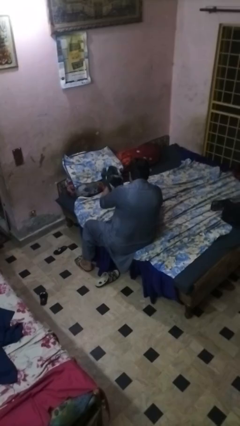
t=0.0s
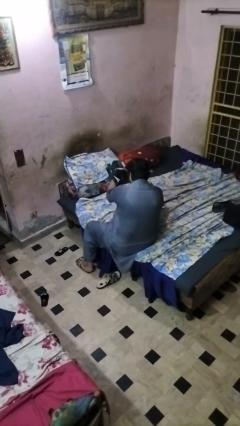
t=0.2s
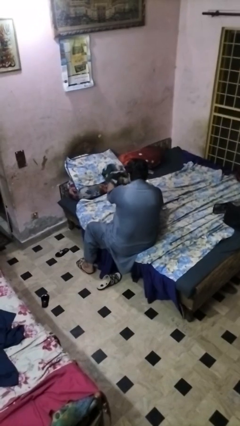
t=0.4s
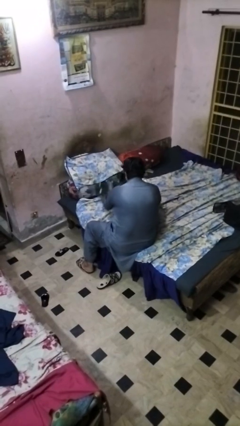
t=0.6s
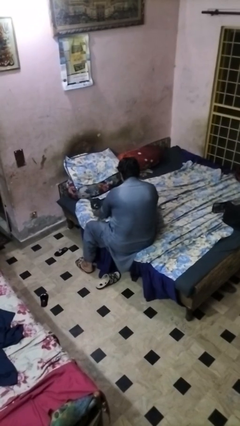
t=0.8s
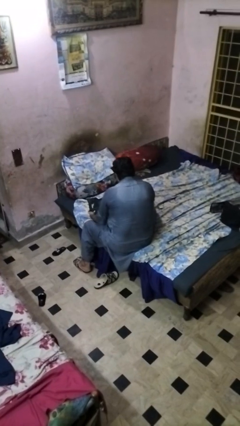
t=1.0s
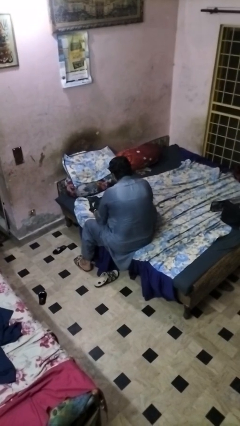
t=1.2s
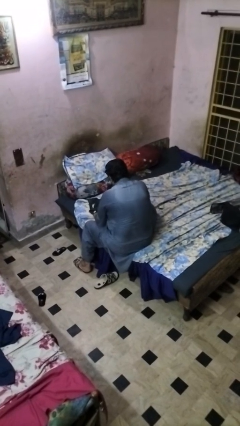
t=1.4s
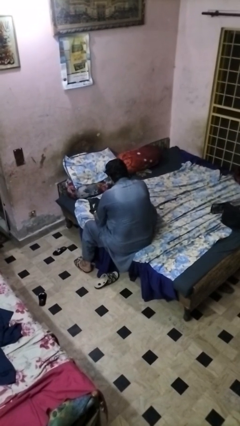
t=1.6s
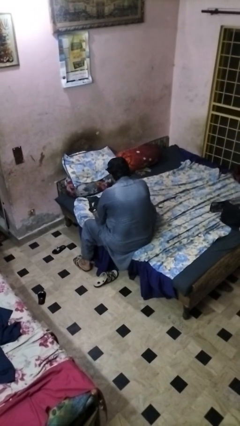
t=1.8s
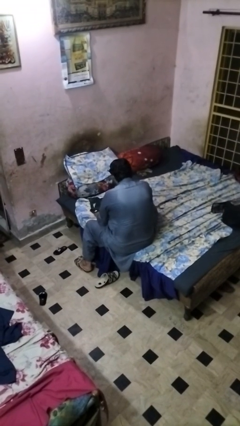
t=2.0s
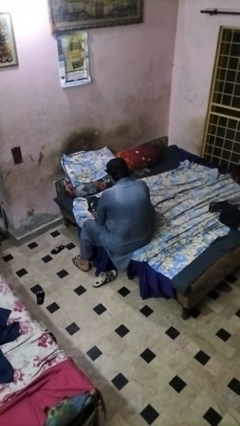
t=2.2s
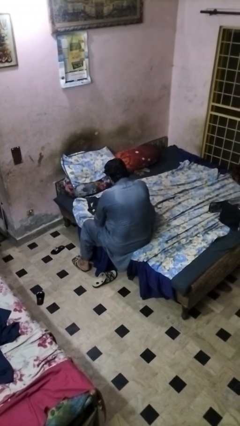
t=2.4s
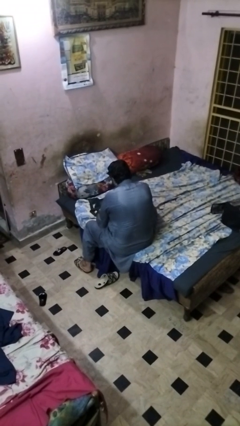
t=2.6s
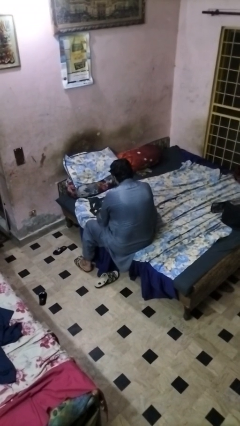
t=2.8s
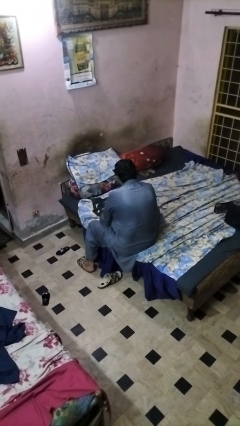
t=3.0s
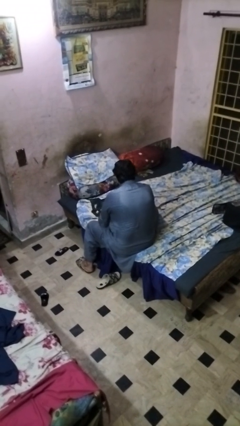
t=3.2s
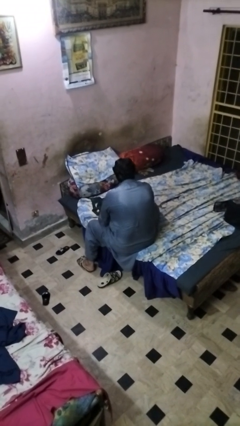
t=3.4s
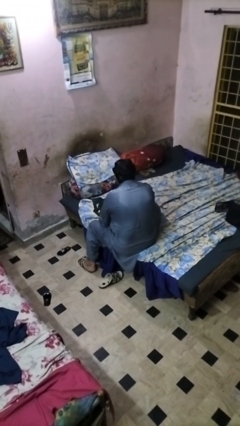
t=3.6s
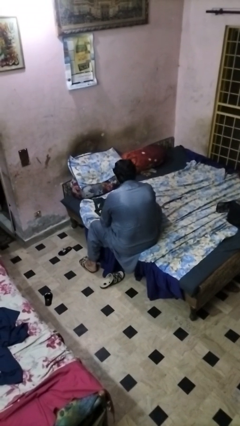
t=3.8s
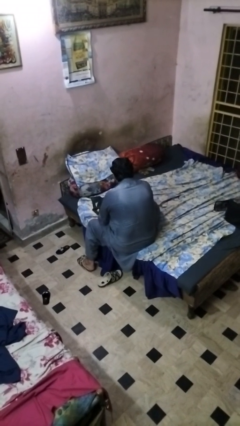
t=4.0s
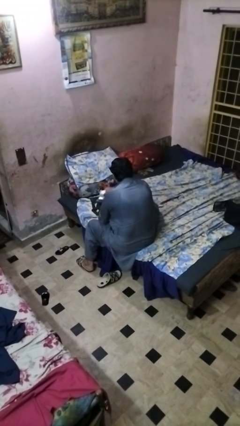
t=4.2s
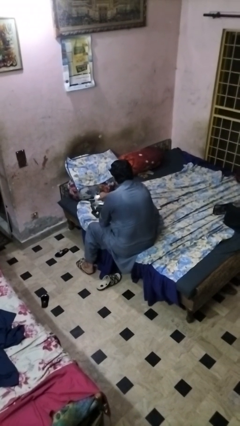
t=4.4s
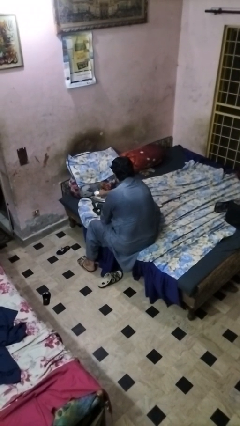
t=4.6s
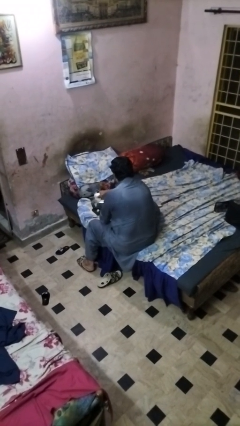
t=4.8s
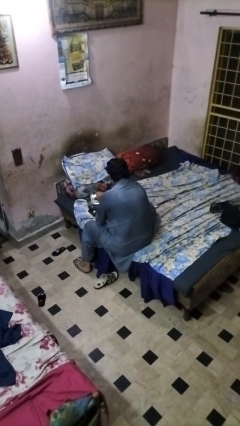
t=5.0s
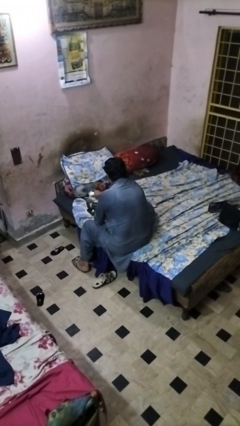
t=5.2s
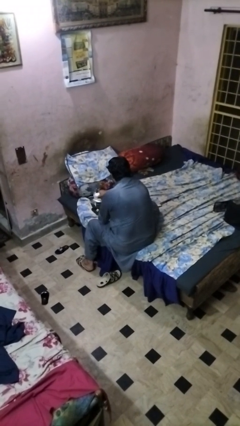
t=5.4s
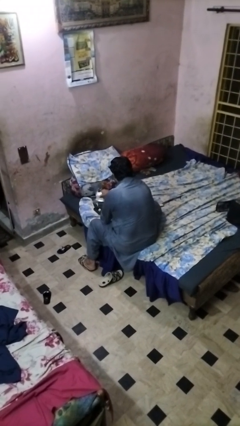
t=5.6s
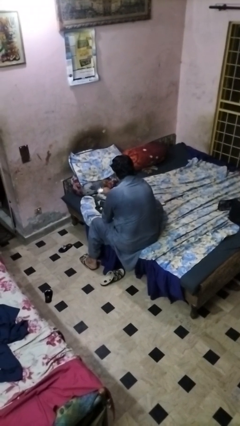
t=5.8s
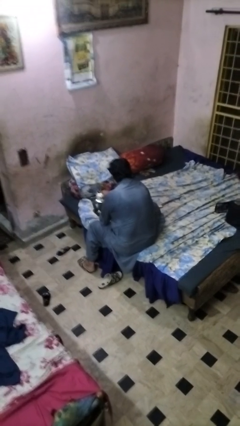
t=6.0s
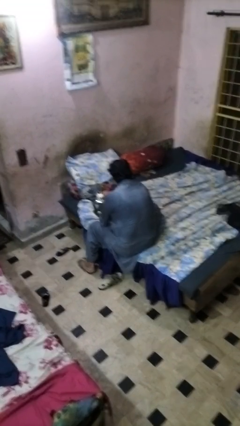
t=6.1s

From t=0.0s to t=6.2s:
person irons clothes

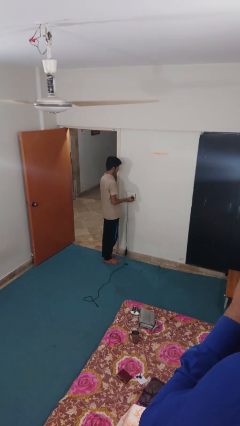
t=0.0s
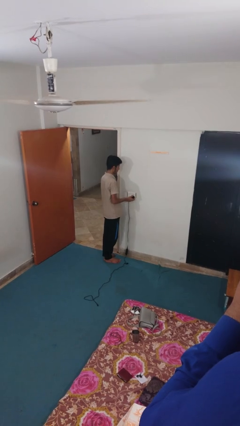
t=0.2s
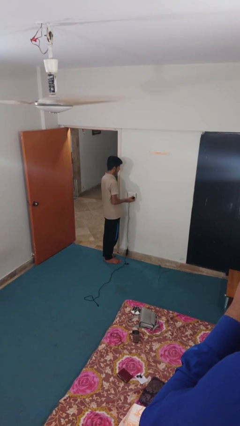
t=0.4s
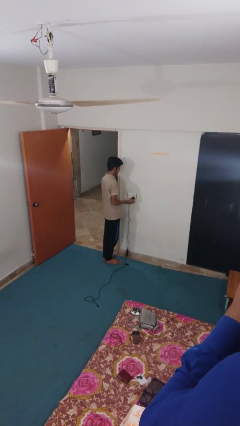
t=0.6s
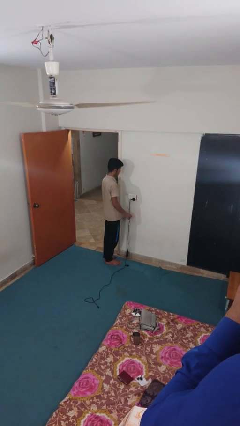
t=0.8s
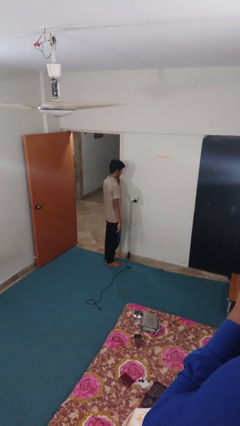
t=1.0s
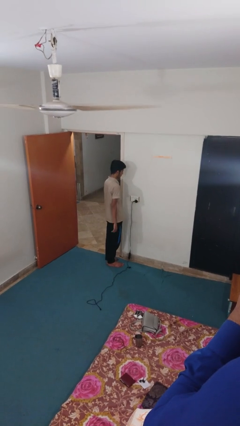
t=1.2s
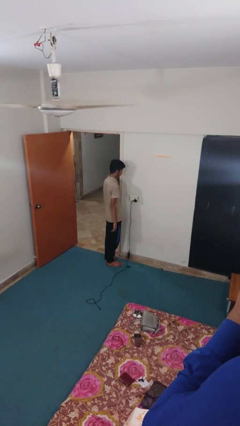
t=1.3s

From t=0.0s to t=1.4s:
person unplugs from electrical socket

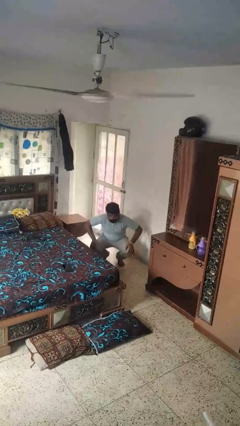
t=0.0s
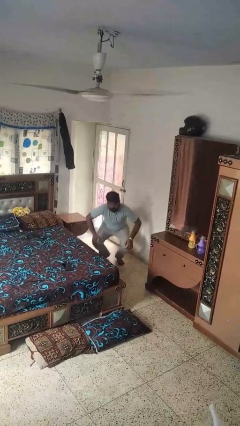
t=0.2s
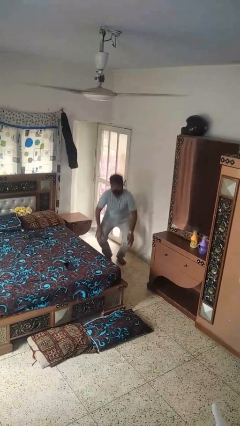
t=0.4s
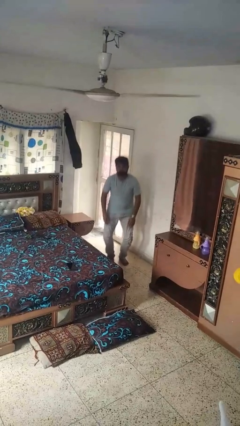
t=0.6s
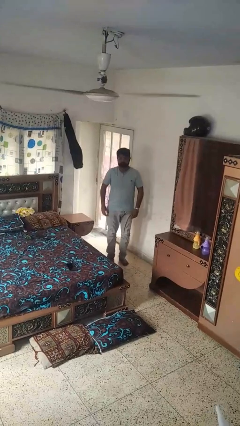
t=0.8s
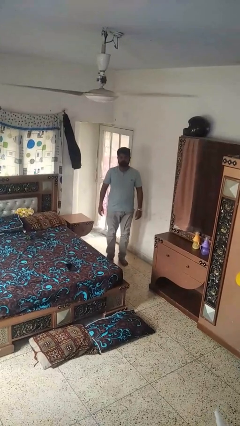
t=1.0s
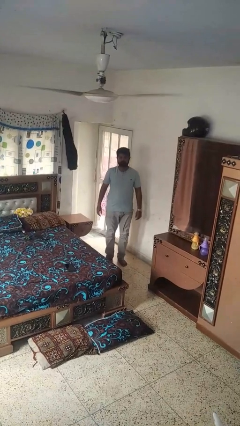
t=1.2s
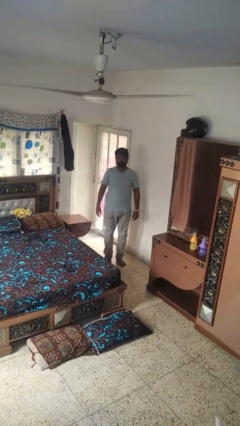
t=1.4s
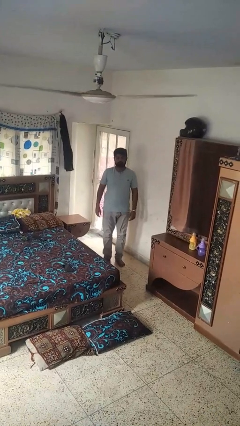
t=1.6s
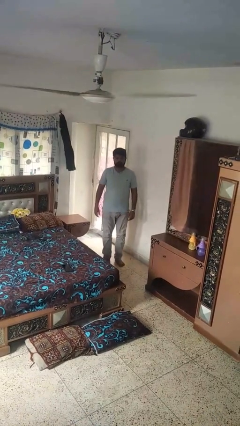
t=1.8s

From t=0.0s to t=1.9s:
person stands up

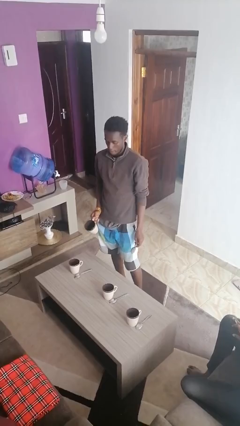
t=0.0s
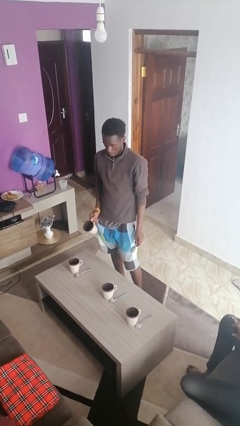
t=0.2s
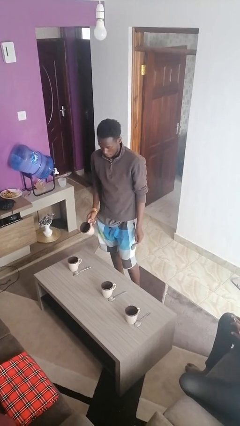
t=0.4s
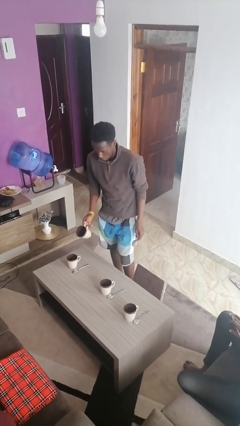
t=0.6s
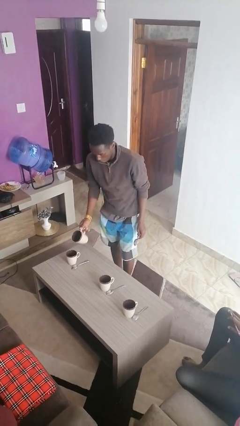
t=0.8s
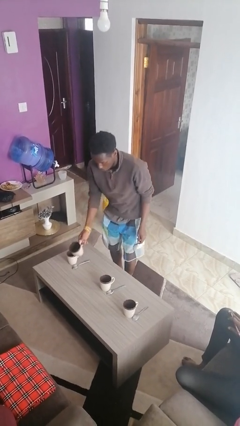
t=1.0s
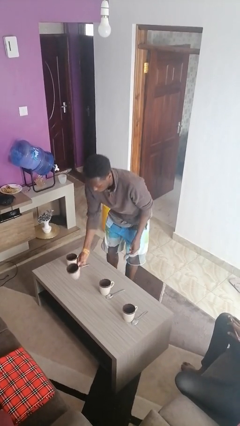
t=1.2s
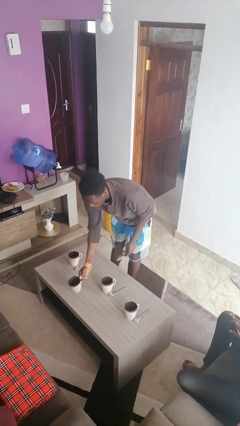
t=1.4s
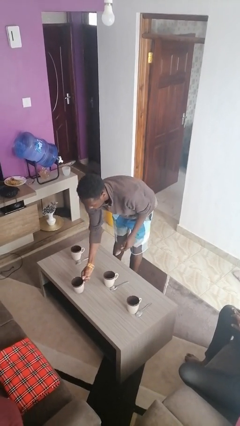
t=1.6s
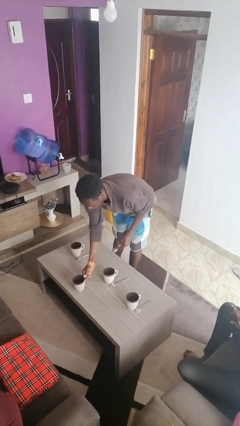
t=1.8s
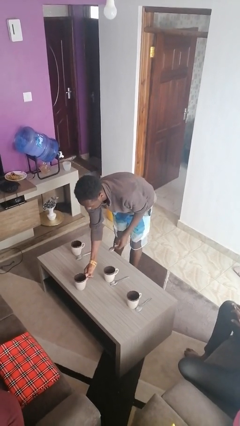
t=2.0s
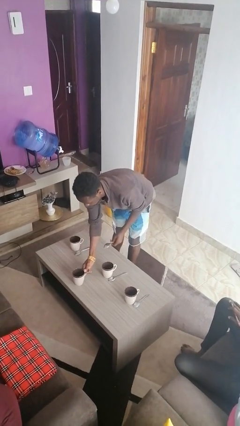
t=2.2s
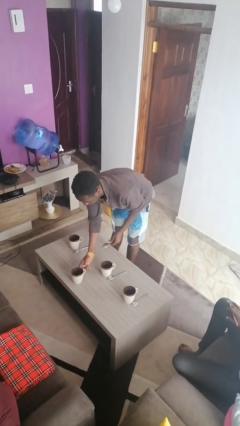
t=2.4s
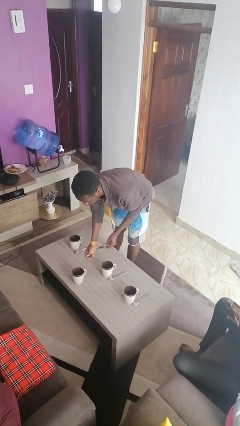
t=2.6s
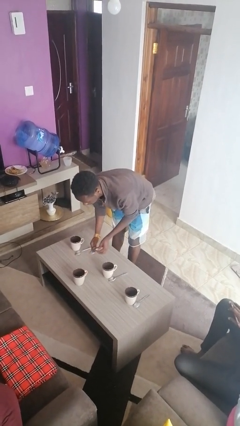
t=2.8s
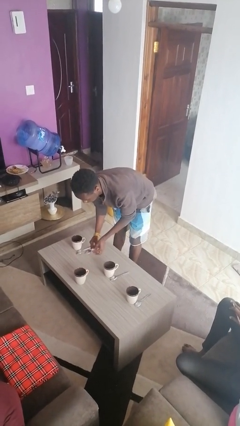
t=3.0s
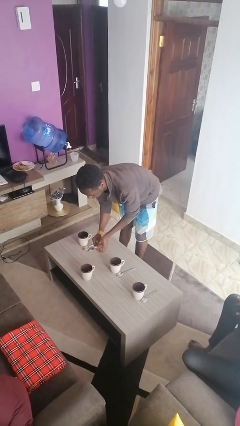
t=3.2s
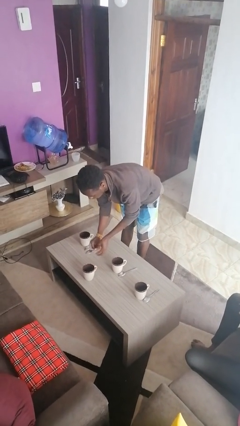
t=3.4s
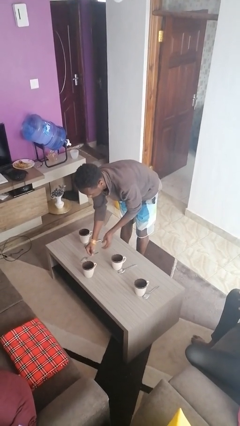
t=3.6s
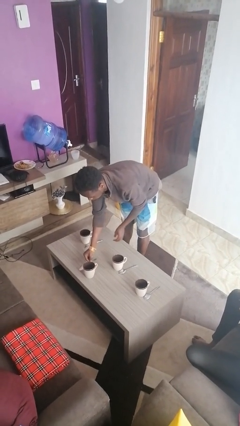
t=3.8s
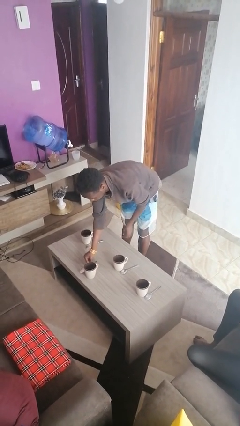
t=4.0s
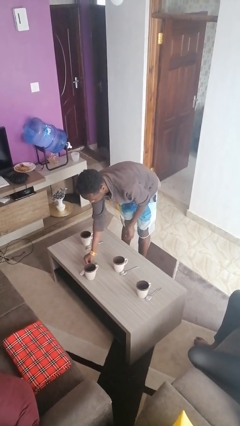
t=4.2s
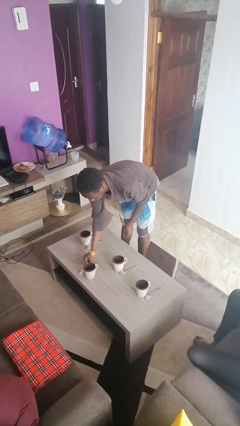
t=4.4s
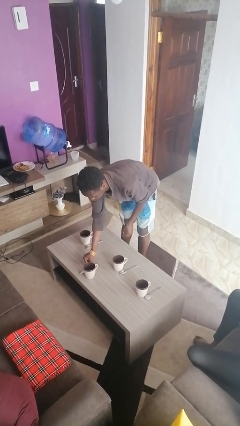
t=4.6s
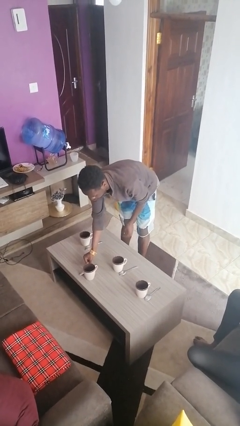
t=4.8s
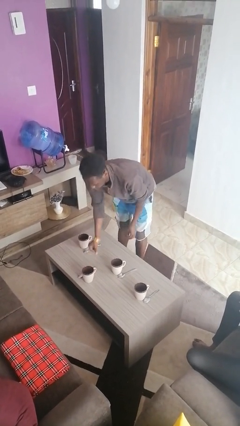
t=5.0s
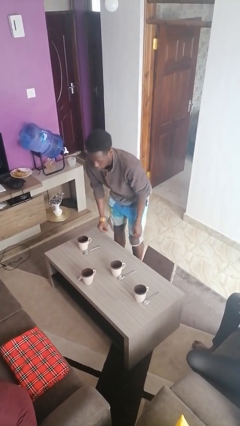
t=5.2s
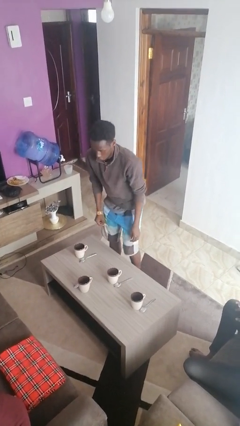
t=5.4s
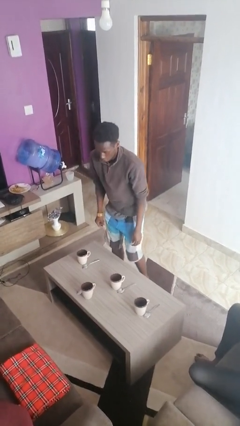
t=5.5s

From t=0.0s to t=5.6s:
person sets table

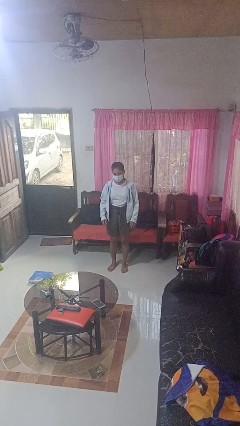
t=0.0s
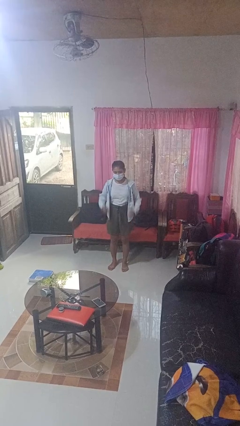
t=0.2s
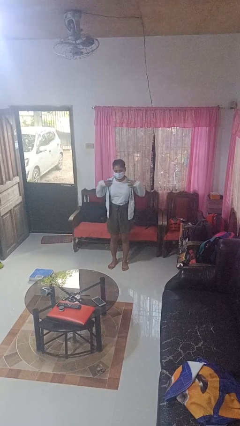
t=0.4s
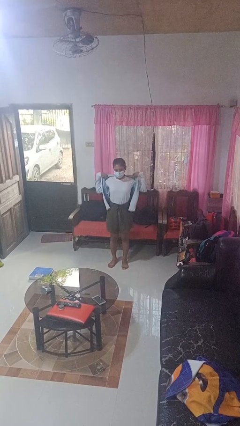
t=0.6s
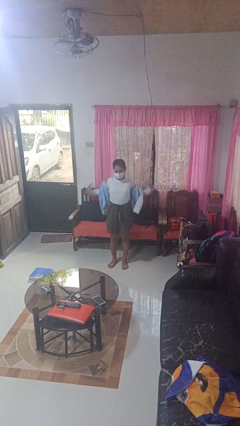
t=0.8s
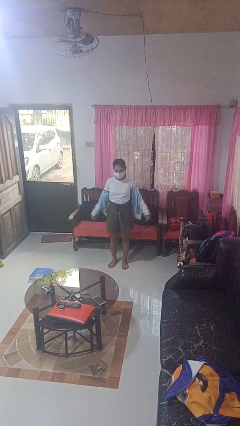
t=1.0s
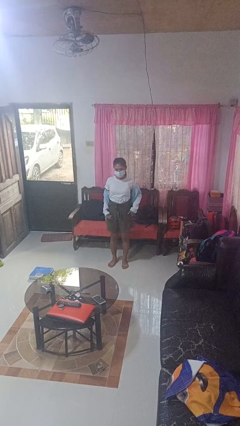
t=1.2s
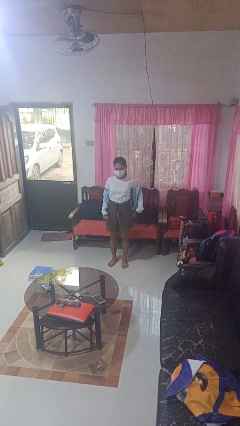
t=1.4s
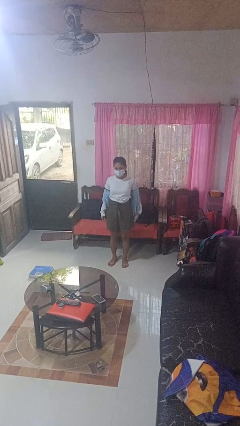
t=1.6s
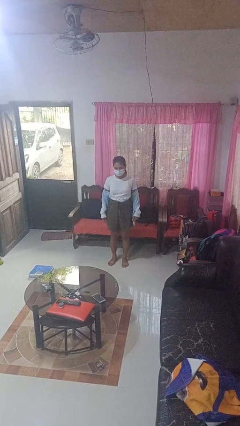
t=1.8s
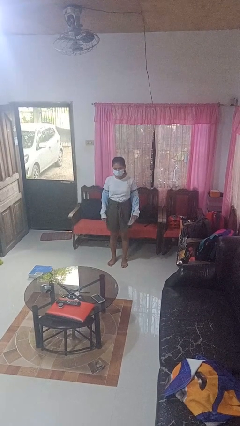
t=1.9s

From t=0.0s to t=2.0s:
person takes off jacket

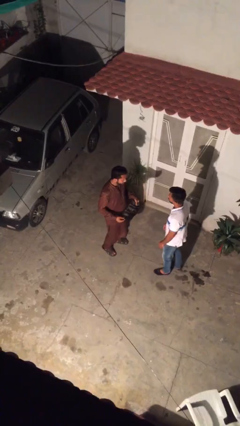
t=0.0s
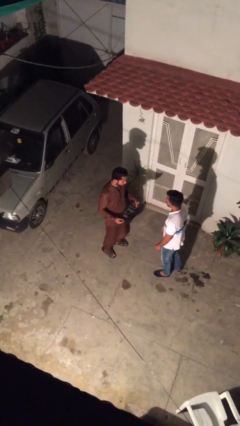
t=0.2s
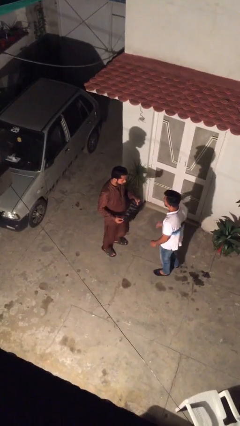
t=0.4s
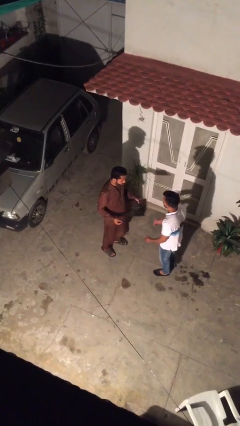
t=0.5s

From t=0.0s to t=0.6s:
person transfers object to person

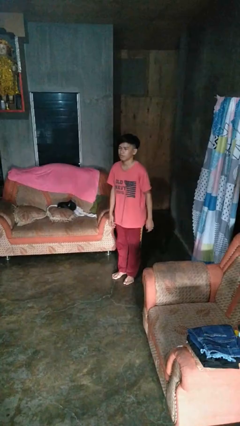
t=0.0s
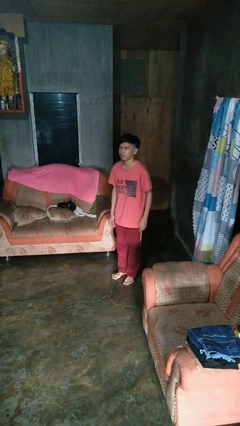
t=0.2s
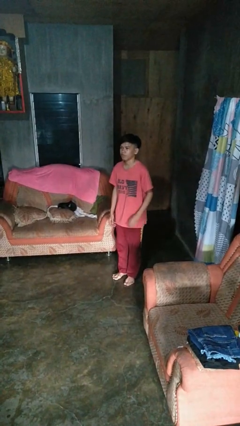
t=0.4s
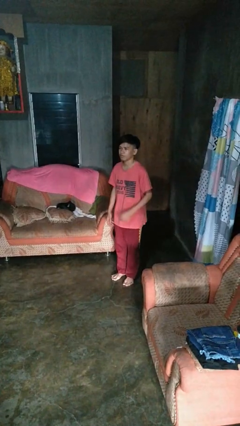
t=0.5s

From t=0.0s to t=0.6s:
person karate chop
